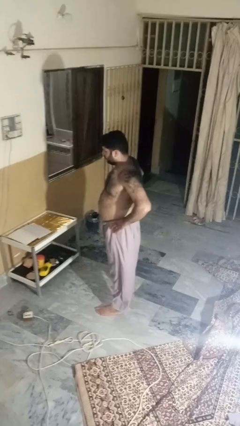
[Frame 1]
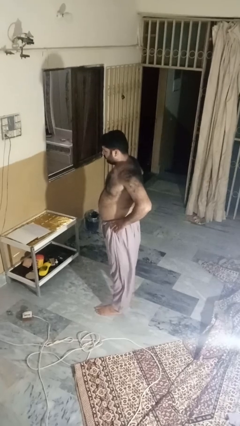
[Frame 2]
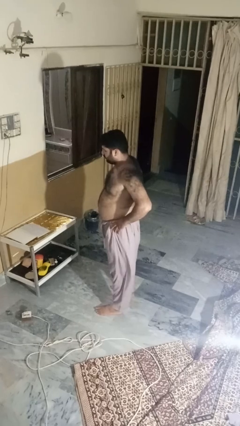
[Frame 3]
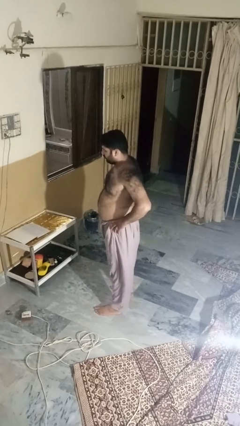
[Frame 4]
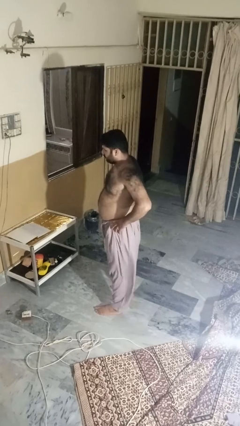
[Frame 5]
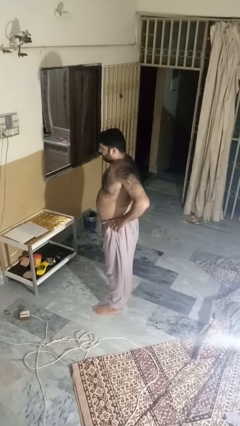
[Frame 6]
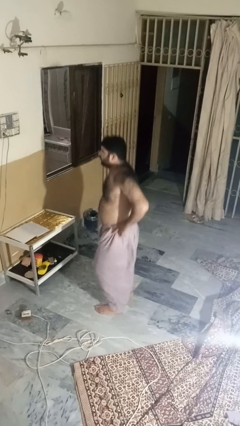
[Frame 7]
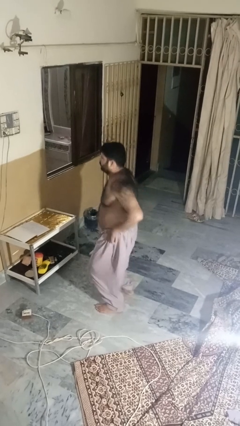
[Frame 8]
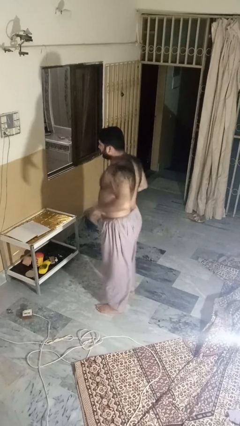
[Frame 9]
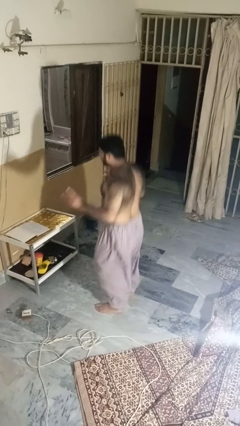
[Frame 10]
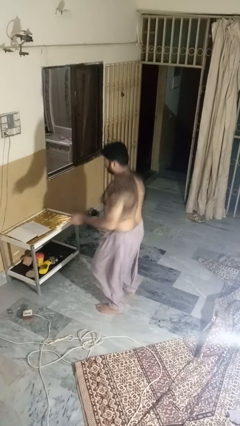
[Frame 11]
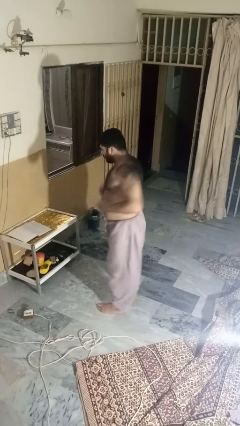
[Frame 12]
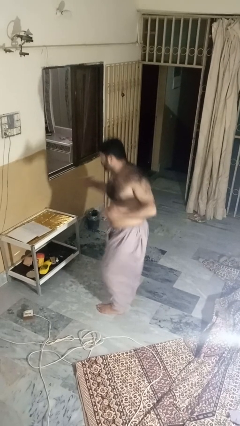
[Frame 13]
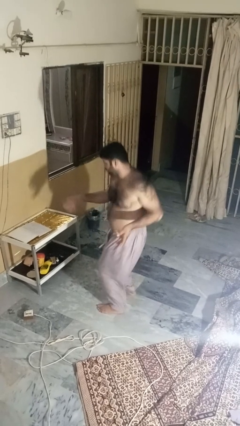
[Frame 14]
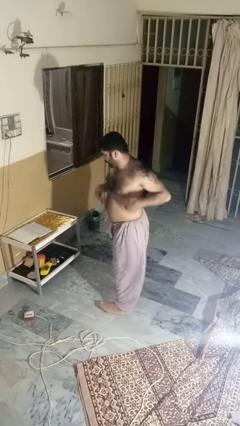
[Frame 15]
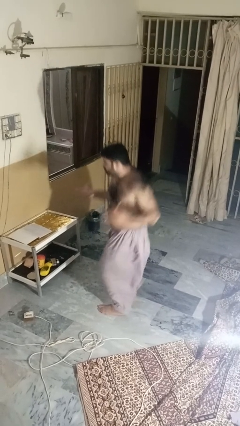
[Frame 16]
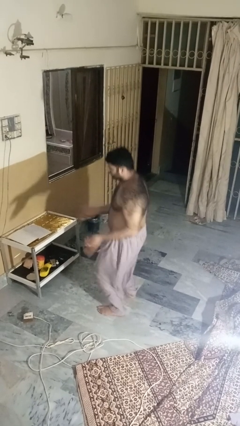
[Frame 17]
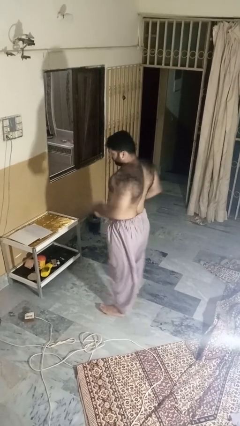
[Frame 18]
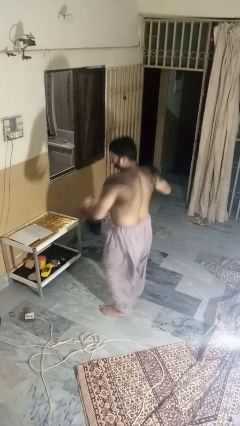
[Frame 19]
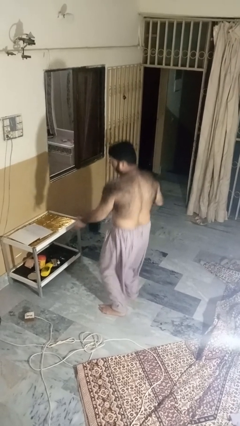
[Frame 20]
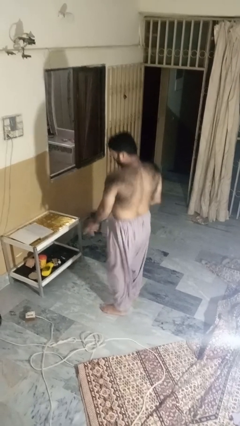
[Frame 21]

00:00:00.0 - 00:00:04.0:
person dances in place

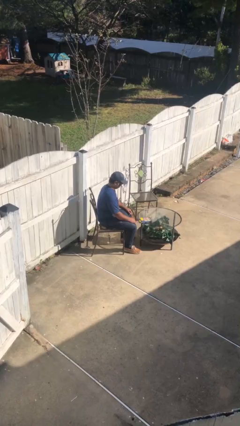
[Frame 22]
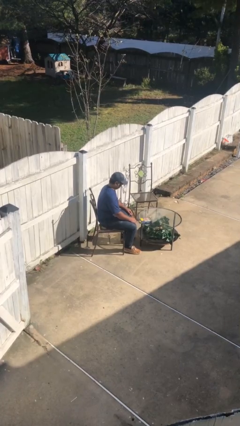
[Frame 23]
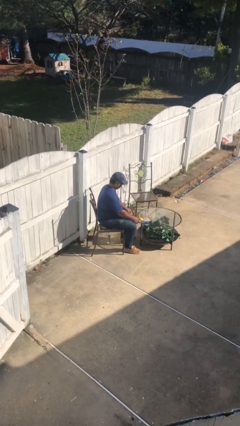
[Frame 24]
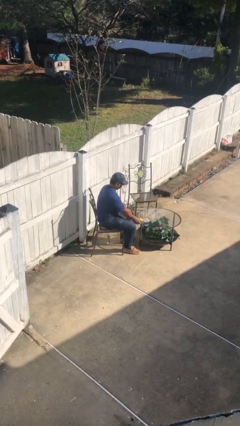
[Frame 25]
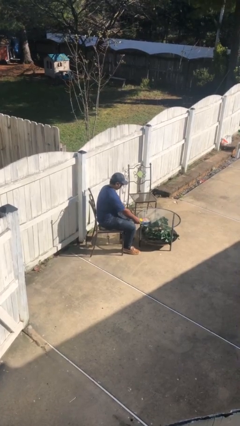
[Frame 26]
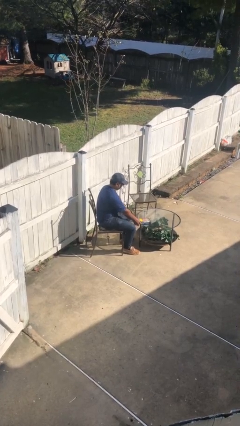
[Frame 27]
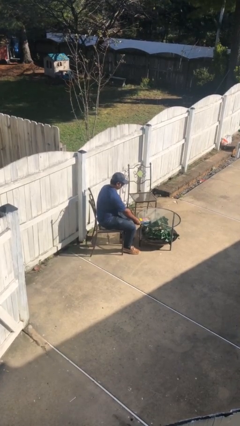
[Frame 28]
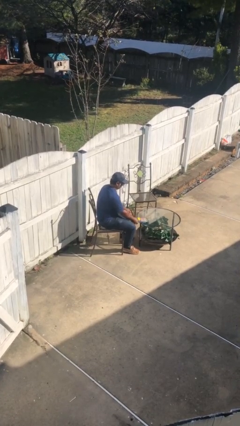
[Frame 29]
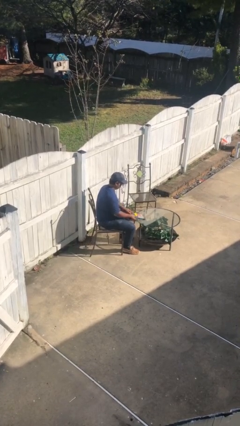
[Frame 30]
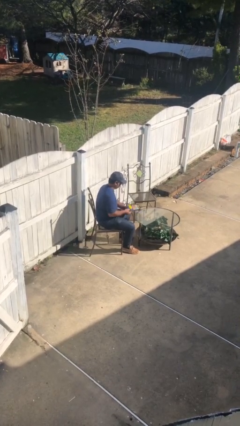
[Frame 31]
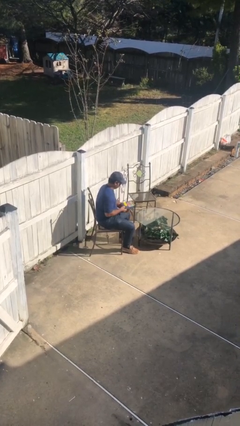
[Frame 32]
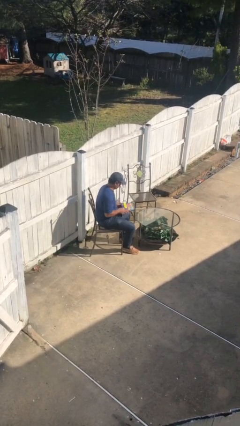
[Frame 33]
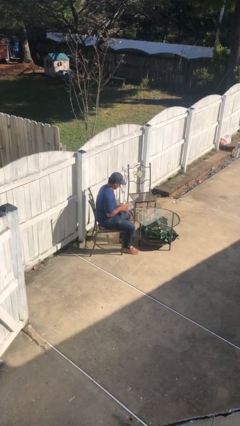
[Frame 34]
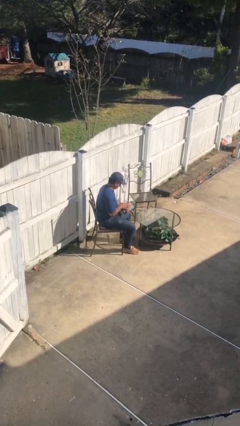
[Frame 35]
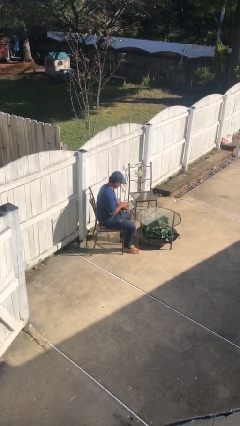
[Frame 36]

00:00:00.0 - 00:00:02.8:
person picks up object from table

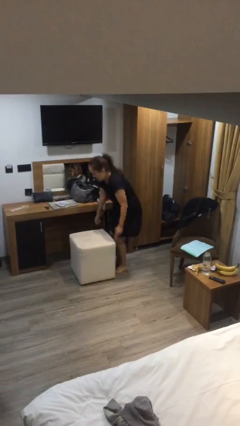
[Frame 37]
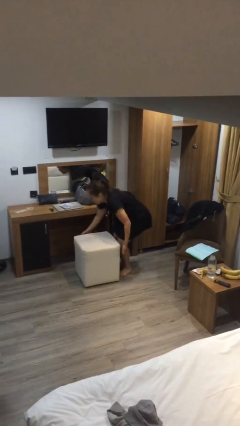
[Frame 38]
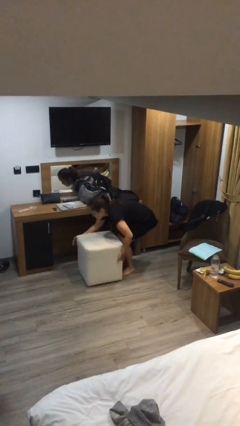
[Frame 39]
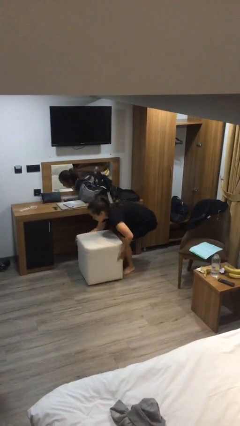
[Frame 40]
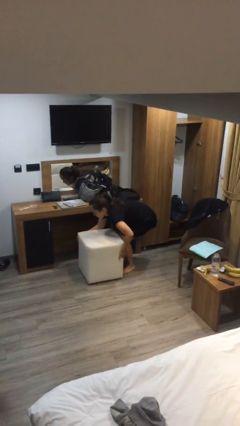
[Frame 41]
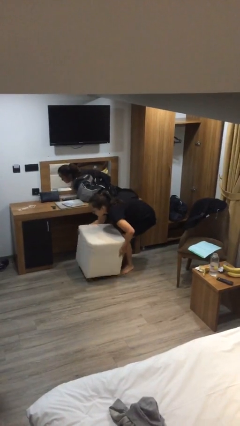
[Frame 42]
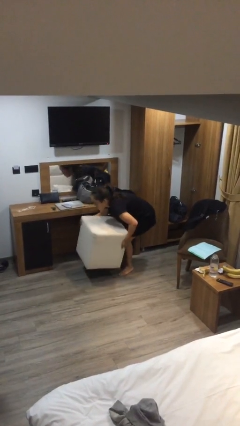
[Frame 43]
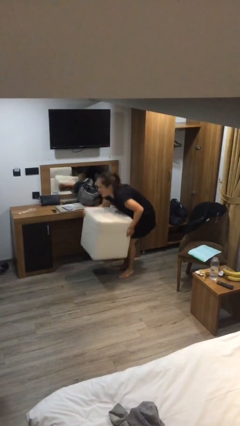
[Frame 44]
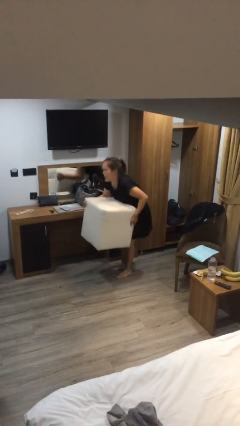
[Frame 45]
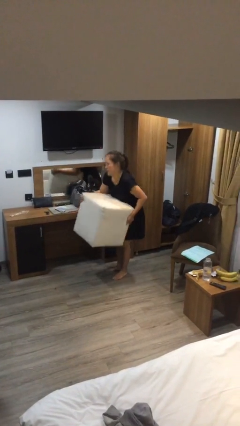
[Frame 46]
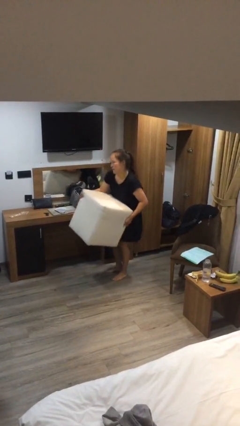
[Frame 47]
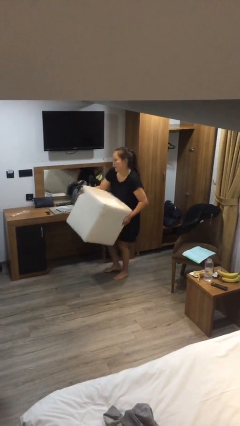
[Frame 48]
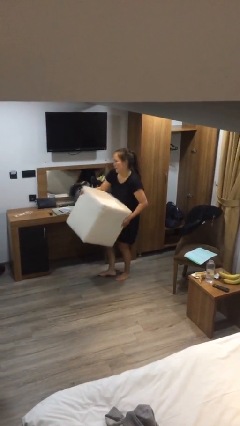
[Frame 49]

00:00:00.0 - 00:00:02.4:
person picks up object from floor

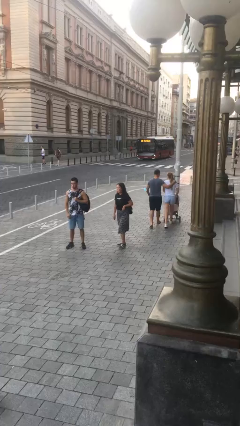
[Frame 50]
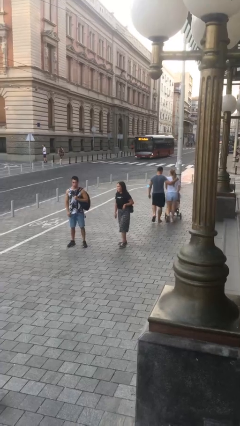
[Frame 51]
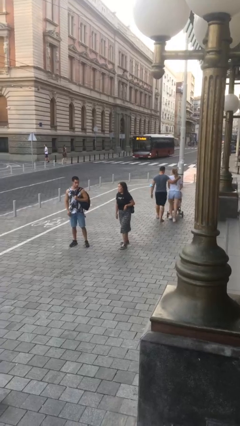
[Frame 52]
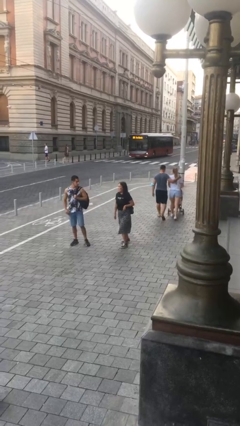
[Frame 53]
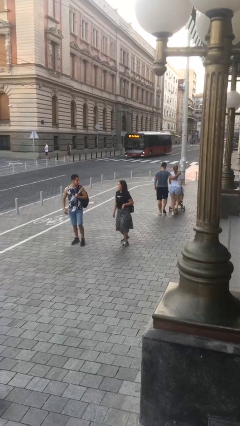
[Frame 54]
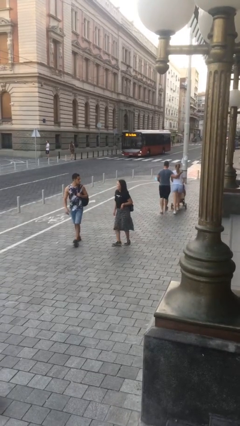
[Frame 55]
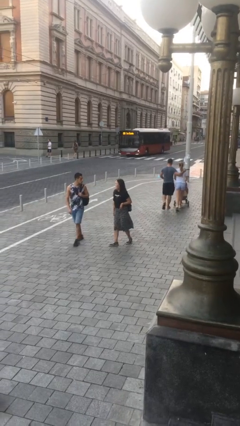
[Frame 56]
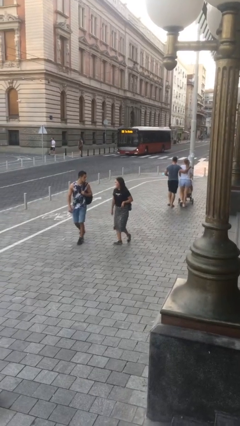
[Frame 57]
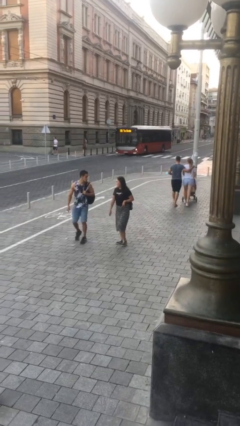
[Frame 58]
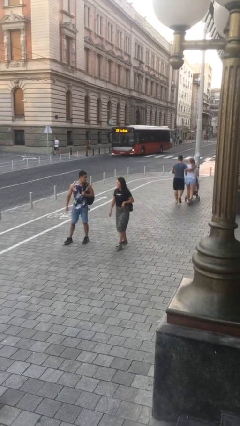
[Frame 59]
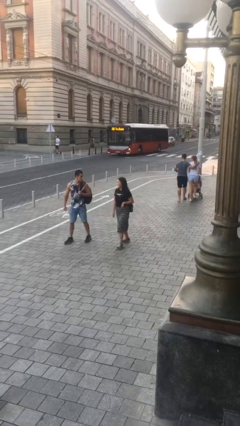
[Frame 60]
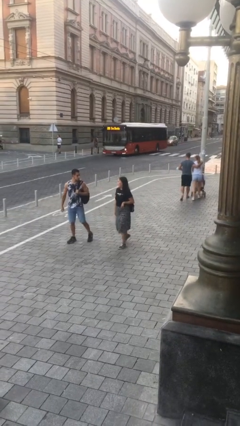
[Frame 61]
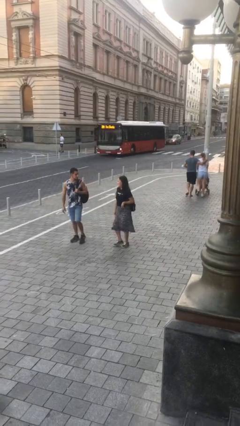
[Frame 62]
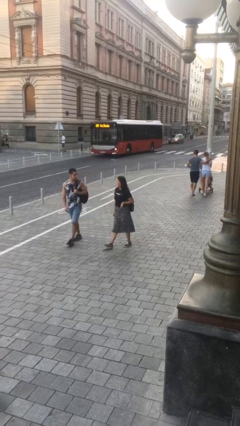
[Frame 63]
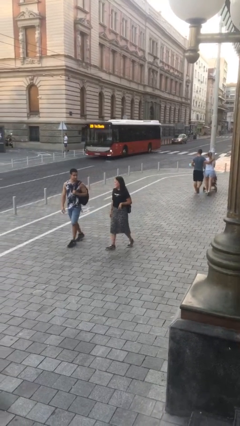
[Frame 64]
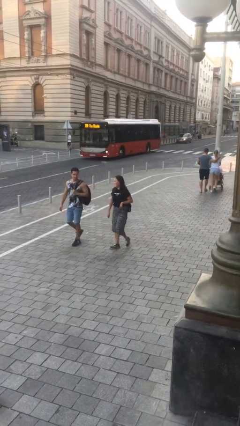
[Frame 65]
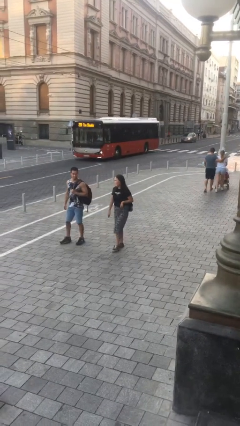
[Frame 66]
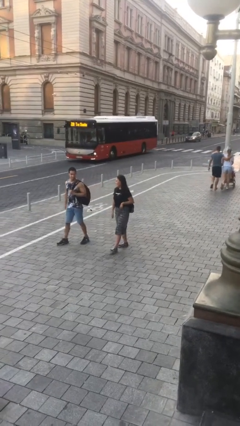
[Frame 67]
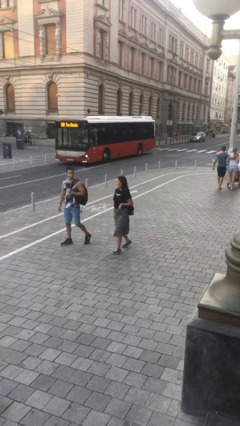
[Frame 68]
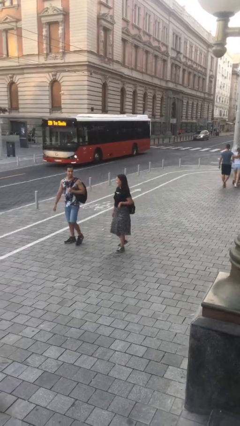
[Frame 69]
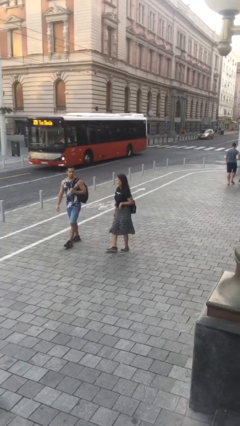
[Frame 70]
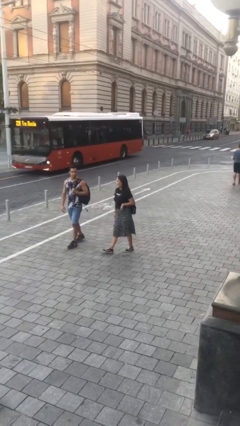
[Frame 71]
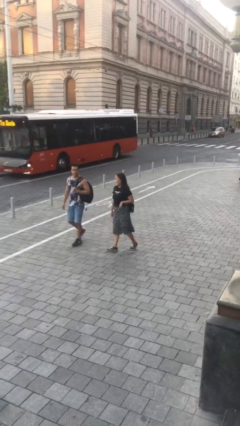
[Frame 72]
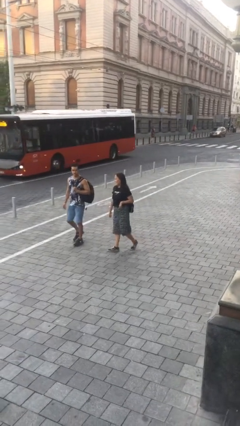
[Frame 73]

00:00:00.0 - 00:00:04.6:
person talks to person

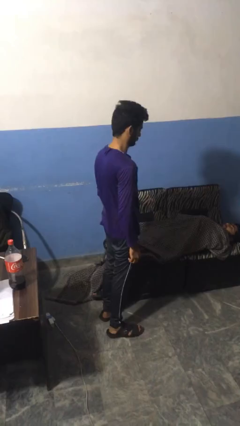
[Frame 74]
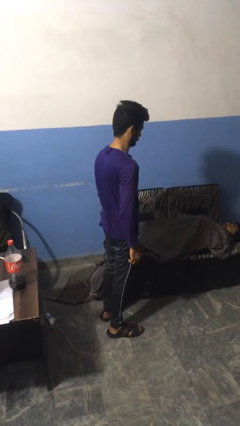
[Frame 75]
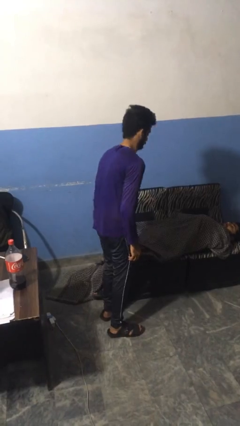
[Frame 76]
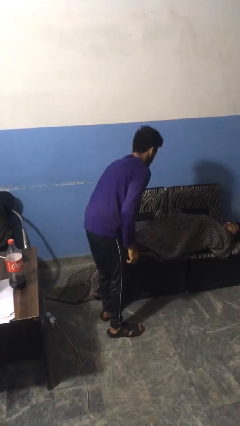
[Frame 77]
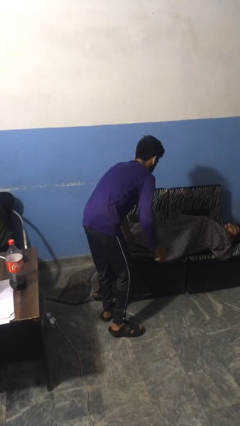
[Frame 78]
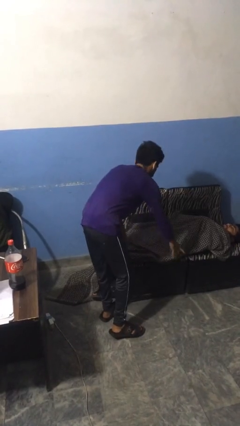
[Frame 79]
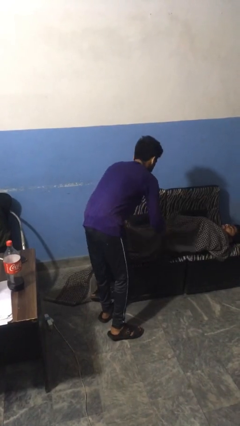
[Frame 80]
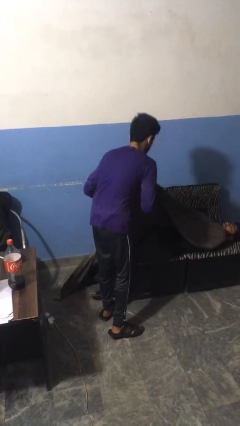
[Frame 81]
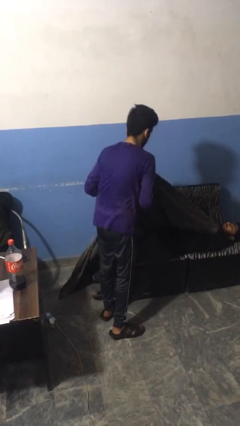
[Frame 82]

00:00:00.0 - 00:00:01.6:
person uncovers friend with blanket

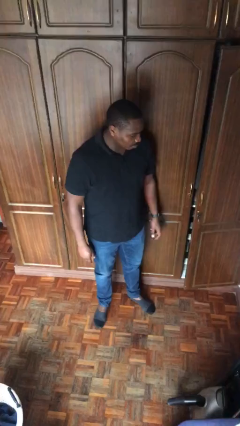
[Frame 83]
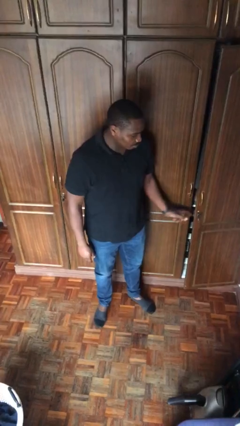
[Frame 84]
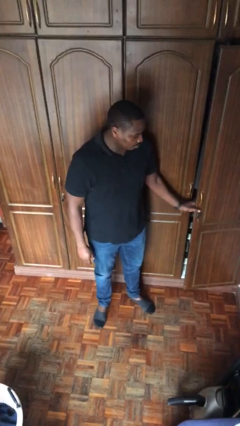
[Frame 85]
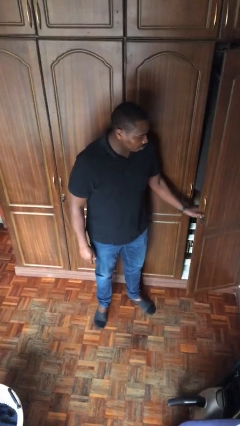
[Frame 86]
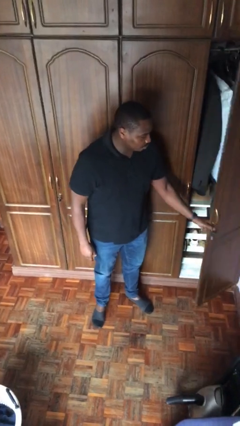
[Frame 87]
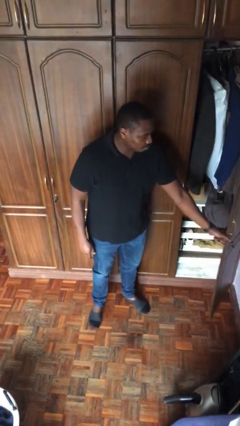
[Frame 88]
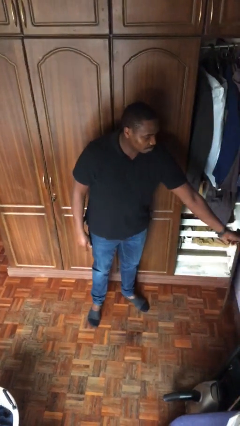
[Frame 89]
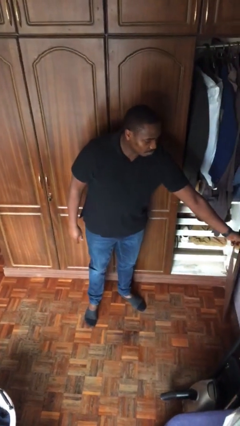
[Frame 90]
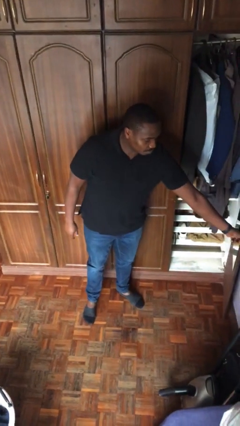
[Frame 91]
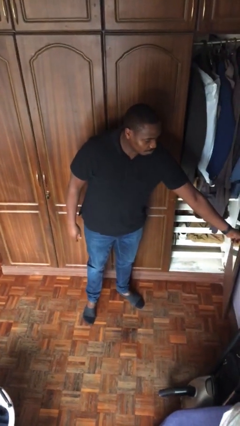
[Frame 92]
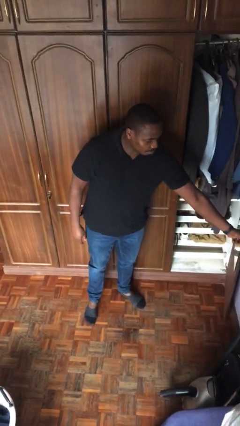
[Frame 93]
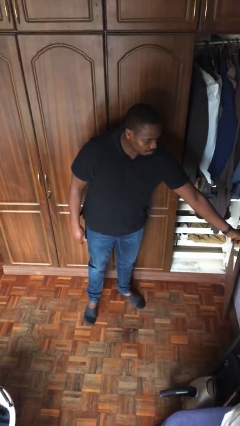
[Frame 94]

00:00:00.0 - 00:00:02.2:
person opens closet door
